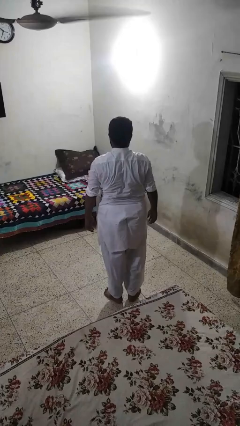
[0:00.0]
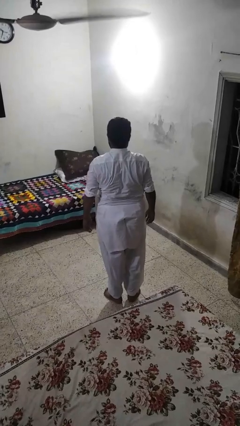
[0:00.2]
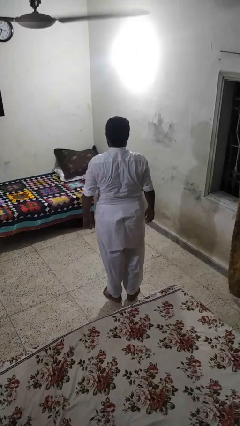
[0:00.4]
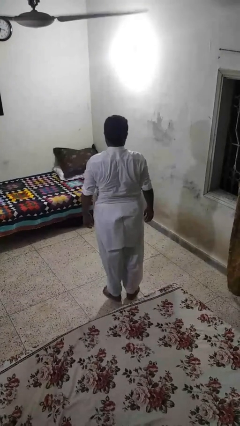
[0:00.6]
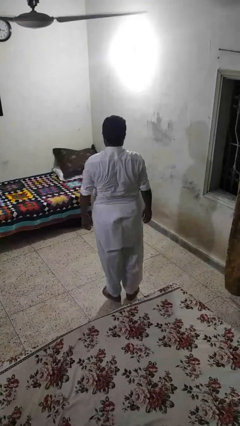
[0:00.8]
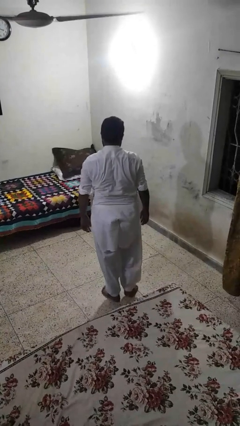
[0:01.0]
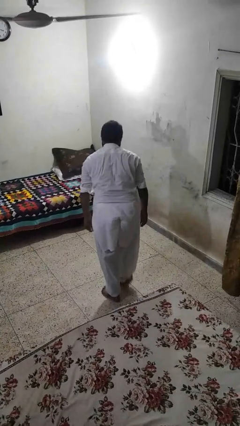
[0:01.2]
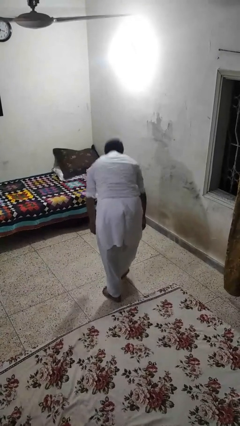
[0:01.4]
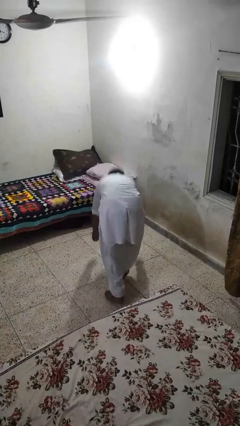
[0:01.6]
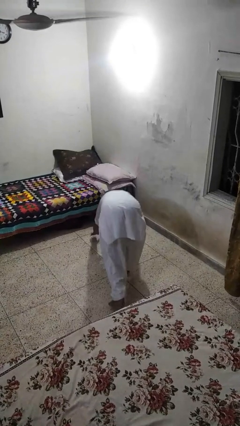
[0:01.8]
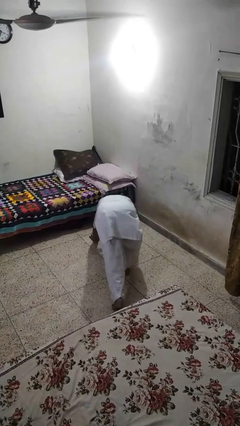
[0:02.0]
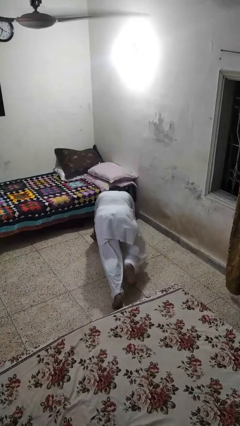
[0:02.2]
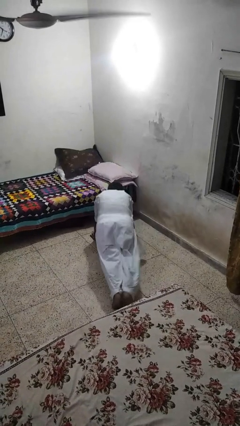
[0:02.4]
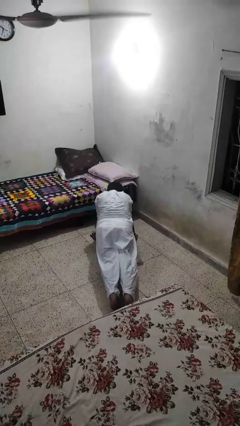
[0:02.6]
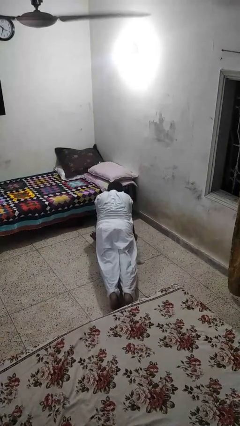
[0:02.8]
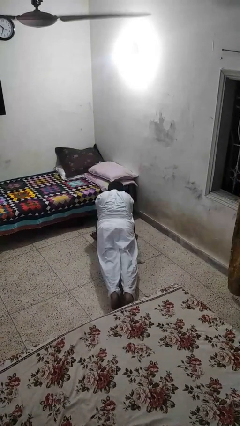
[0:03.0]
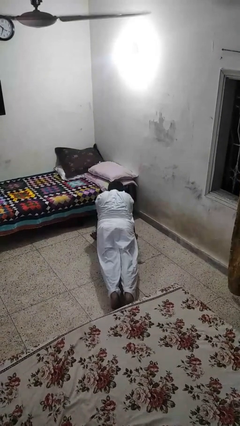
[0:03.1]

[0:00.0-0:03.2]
person exercises with plank

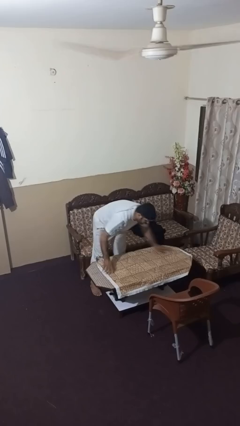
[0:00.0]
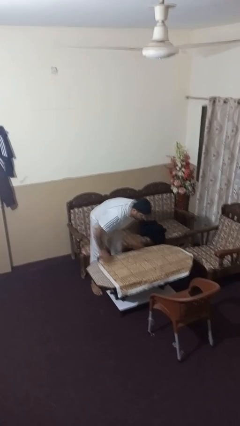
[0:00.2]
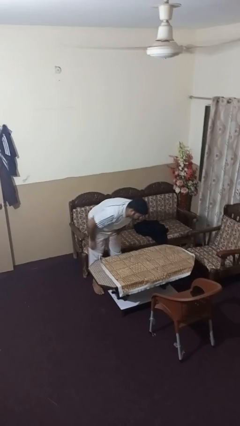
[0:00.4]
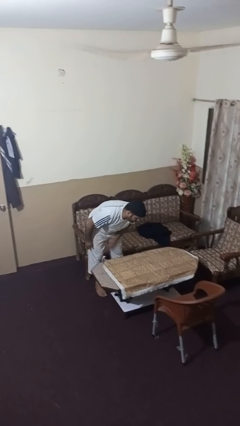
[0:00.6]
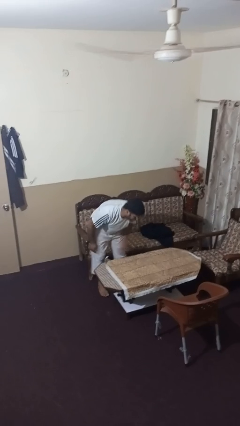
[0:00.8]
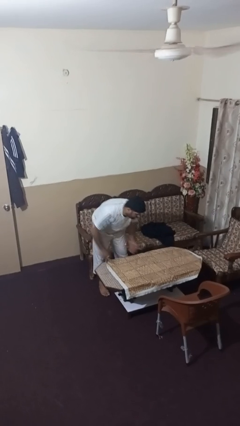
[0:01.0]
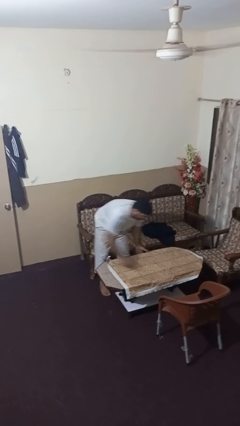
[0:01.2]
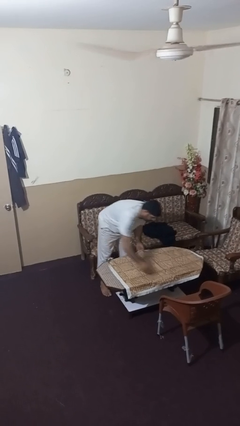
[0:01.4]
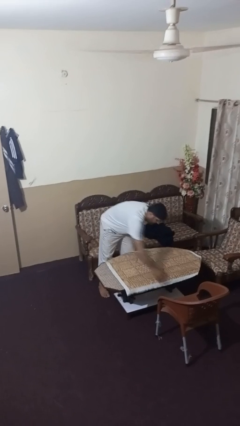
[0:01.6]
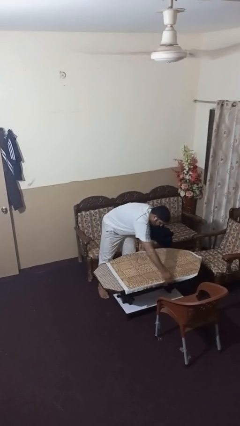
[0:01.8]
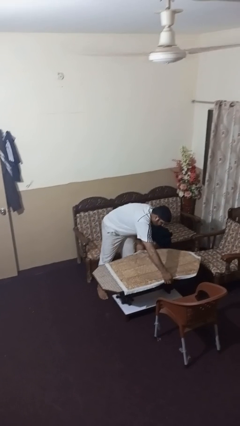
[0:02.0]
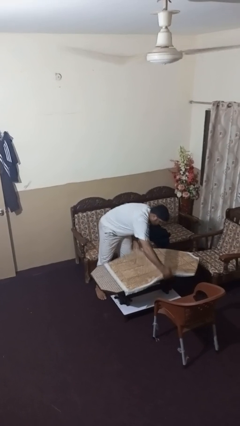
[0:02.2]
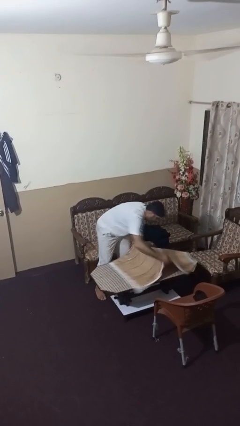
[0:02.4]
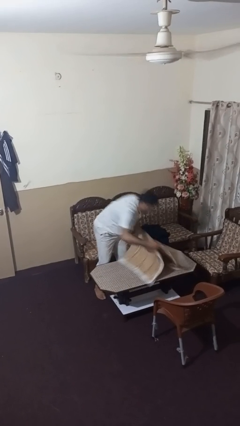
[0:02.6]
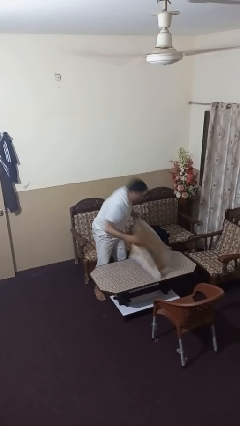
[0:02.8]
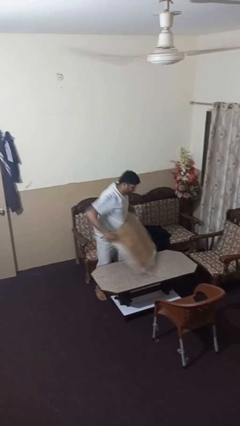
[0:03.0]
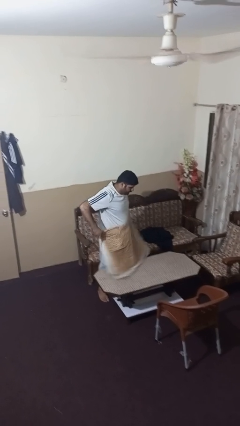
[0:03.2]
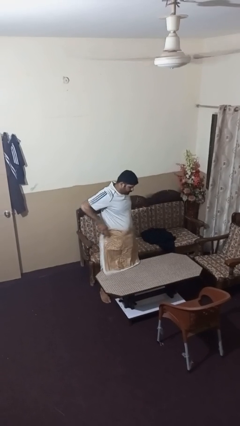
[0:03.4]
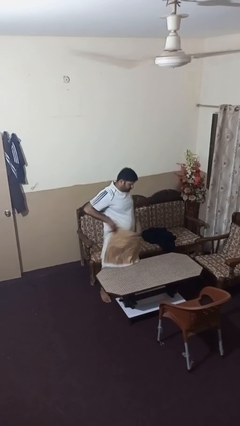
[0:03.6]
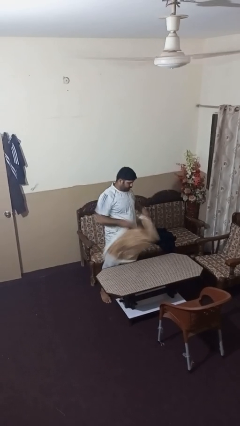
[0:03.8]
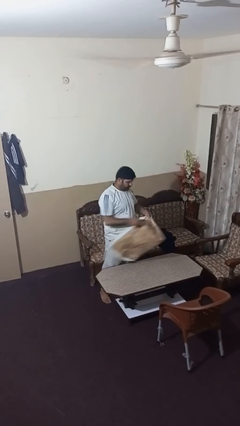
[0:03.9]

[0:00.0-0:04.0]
person folds tablecloth

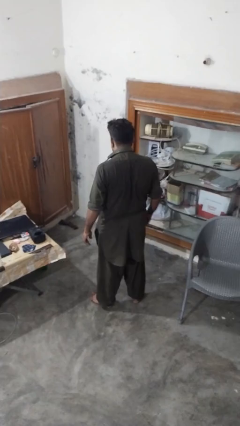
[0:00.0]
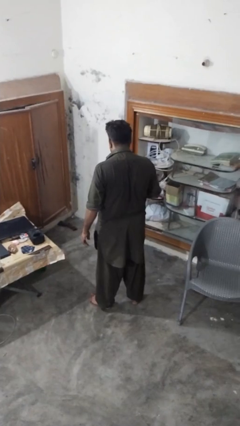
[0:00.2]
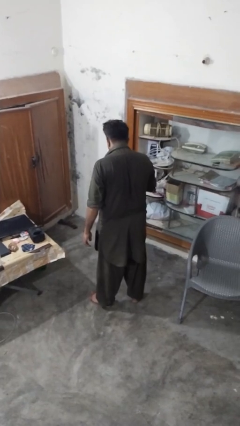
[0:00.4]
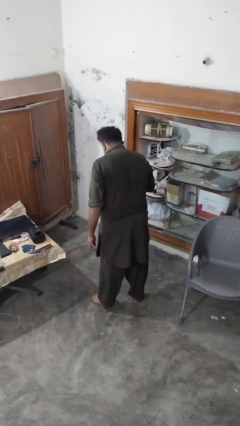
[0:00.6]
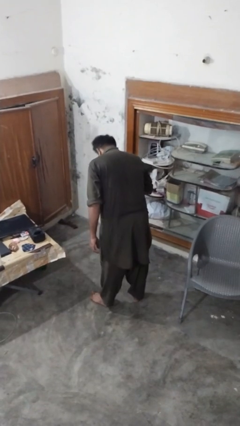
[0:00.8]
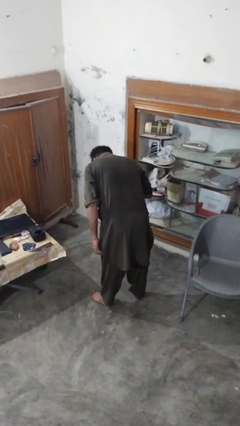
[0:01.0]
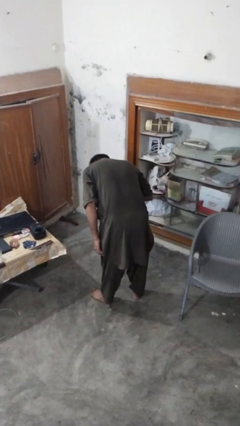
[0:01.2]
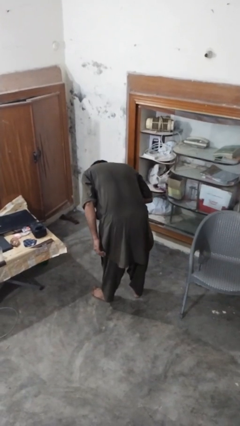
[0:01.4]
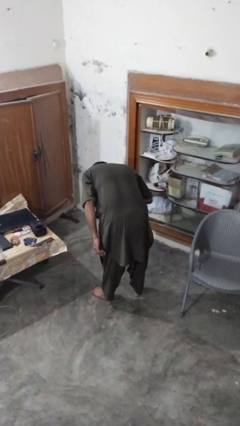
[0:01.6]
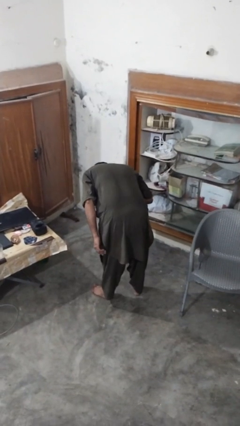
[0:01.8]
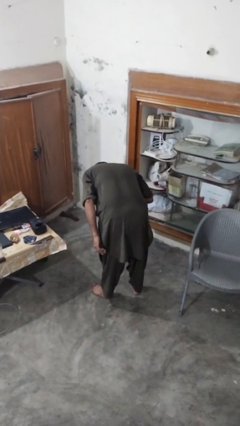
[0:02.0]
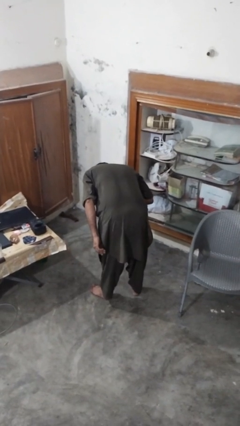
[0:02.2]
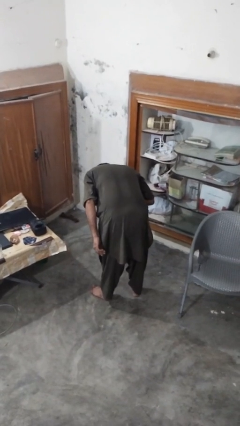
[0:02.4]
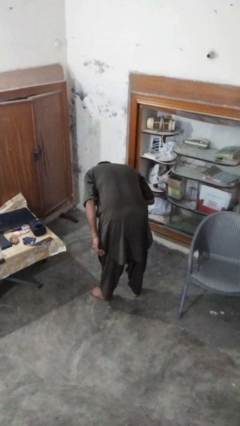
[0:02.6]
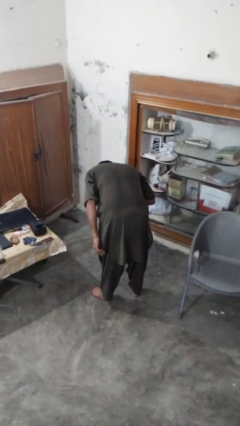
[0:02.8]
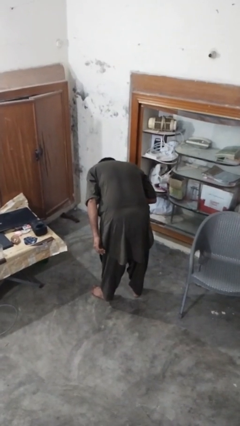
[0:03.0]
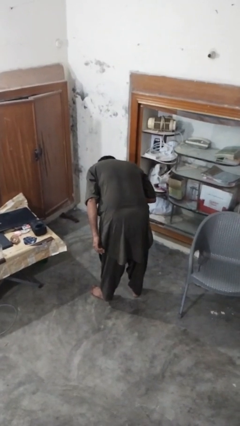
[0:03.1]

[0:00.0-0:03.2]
person bows

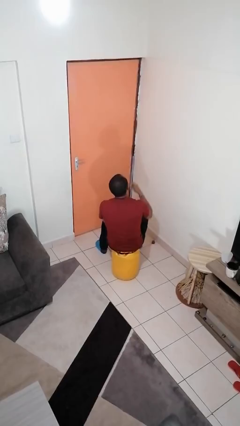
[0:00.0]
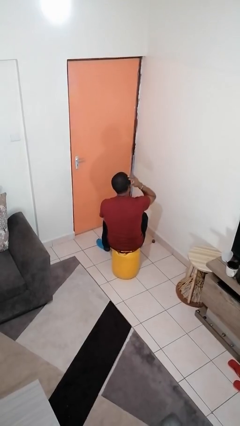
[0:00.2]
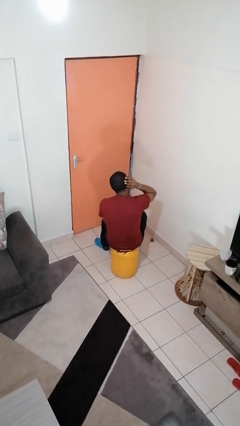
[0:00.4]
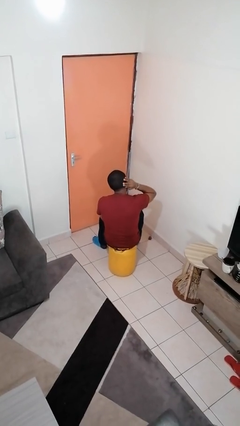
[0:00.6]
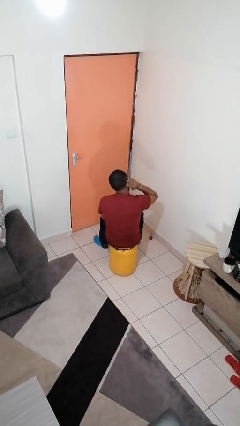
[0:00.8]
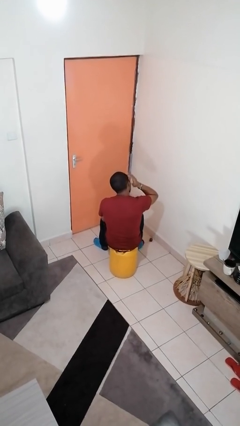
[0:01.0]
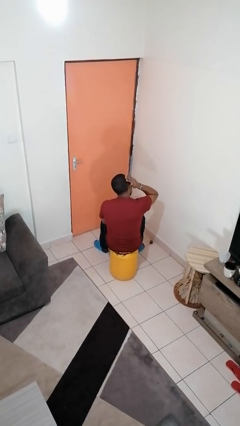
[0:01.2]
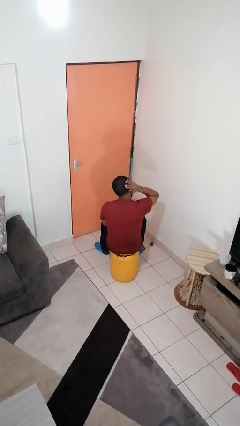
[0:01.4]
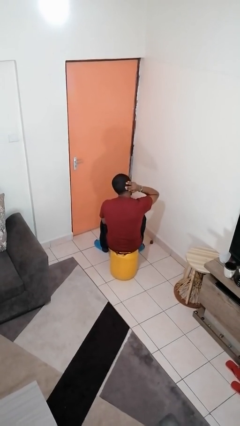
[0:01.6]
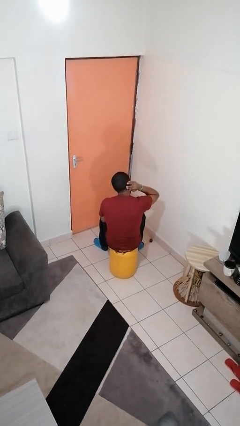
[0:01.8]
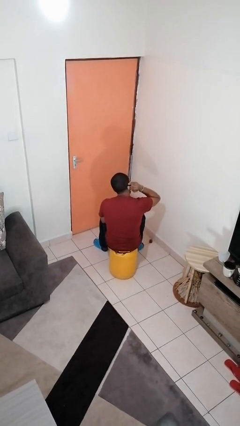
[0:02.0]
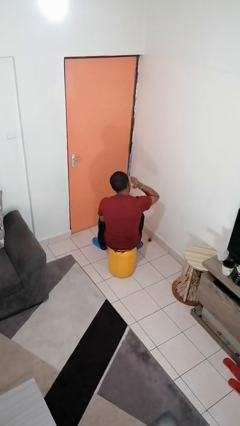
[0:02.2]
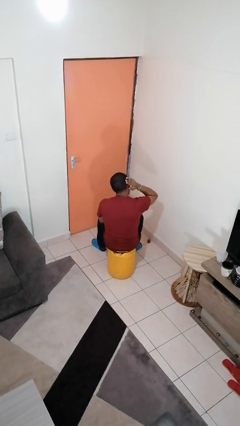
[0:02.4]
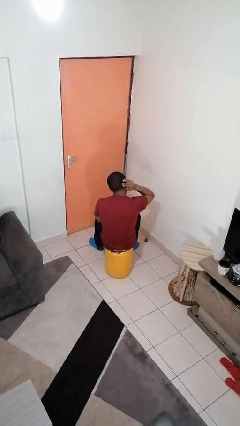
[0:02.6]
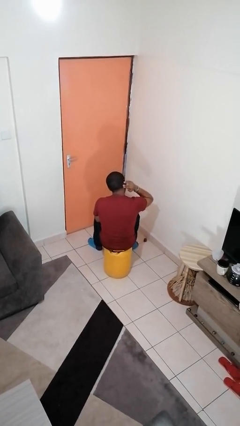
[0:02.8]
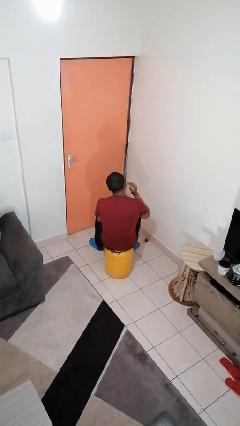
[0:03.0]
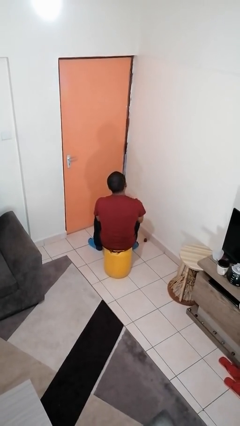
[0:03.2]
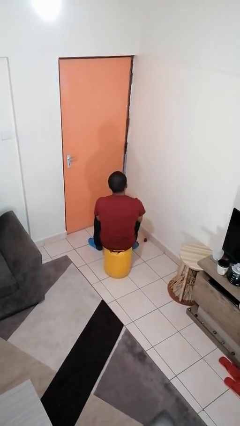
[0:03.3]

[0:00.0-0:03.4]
person strokes hair

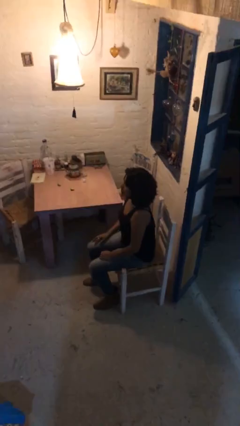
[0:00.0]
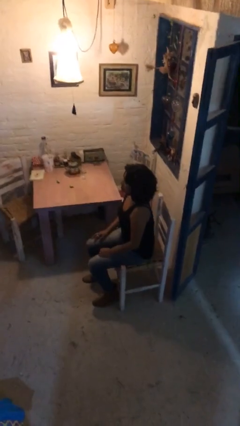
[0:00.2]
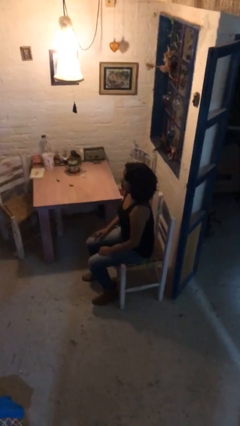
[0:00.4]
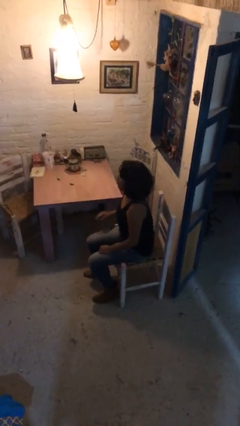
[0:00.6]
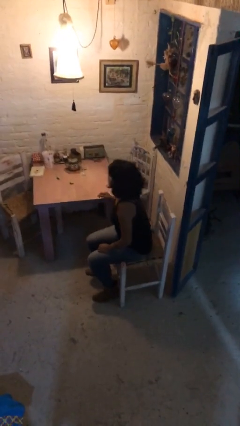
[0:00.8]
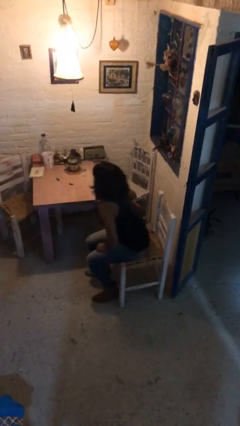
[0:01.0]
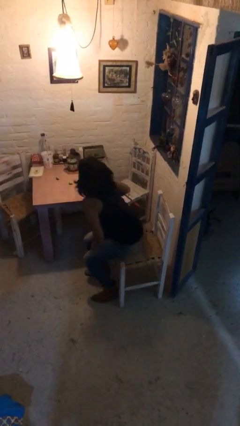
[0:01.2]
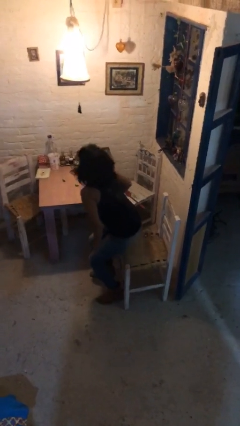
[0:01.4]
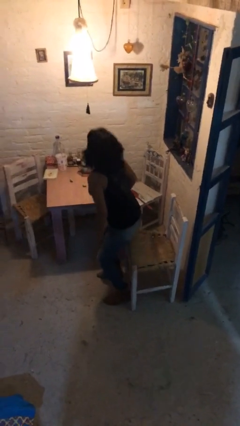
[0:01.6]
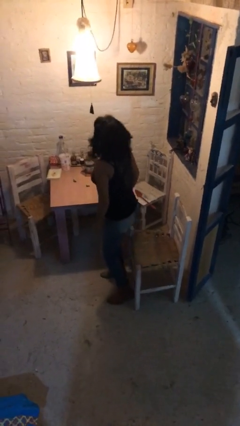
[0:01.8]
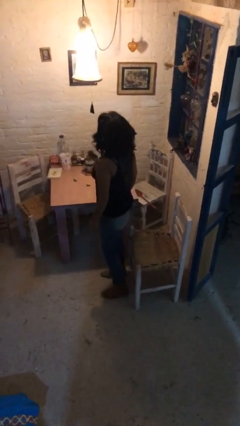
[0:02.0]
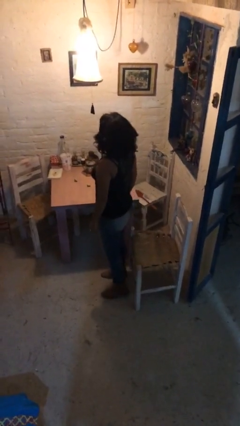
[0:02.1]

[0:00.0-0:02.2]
person stands up

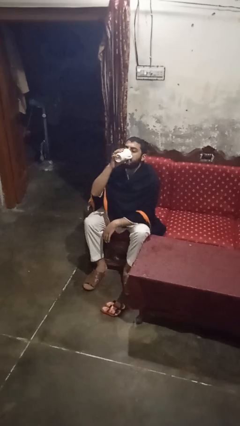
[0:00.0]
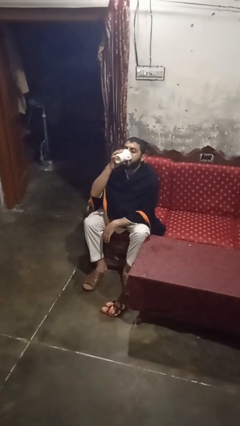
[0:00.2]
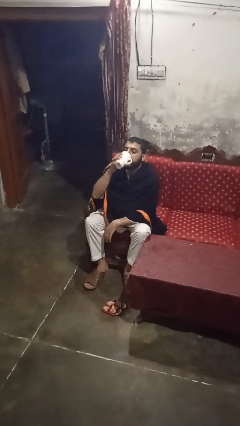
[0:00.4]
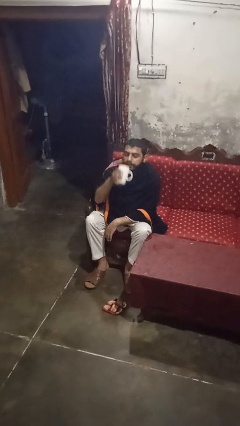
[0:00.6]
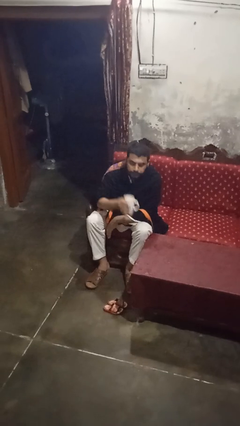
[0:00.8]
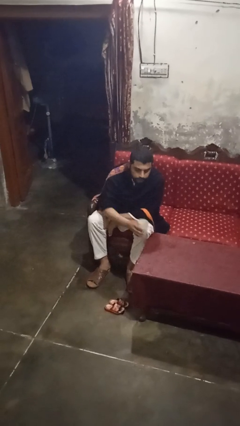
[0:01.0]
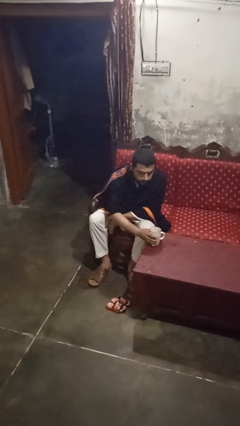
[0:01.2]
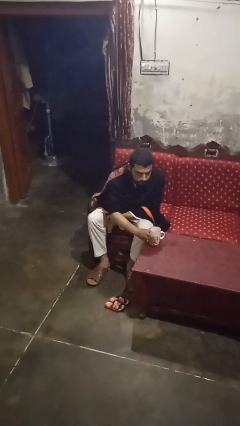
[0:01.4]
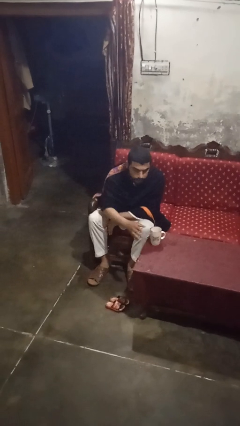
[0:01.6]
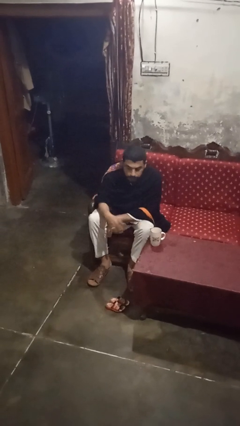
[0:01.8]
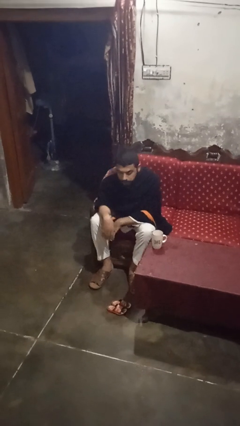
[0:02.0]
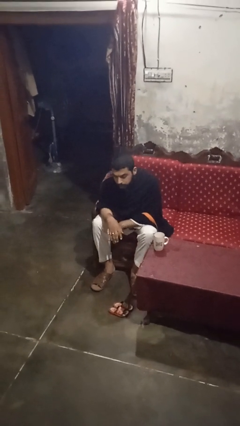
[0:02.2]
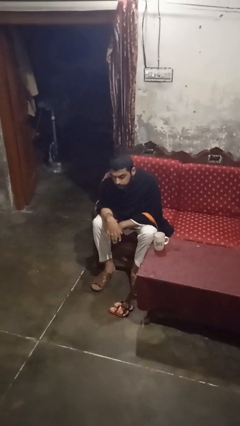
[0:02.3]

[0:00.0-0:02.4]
person puts down object on table
